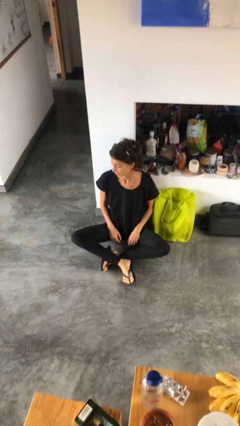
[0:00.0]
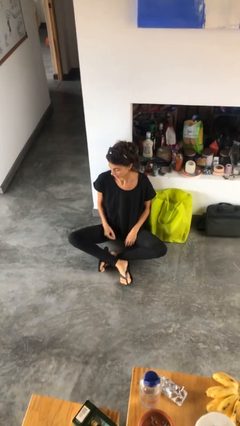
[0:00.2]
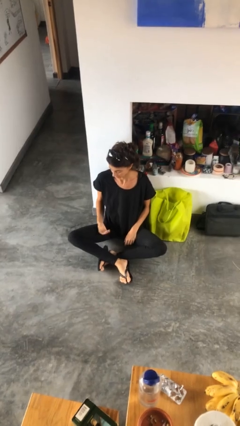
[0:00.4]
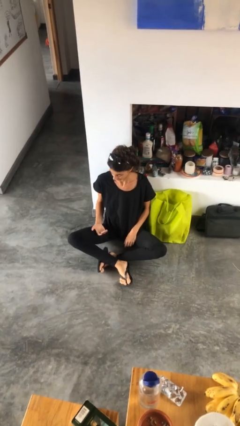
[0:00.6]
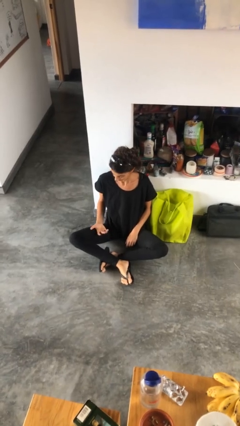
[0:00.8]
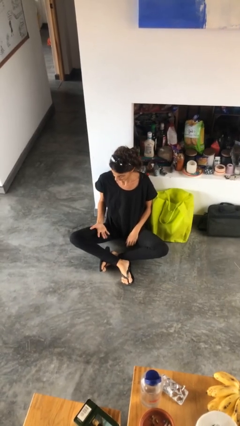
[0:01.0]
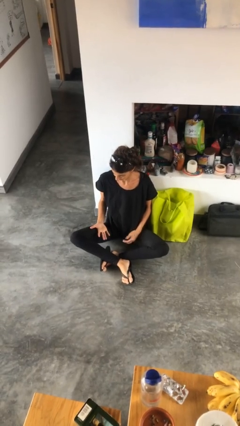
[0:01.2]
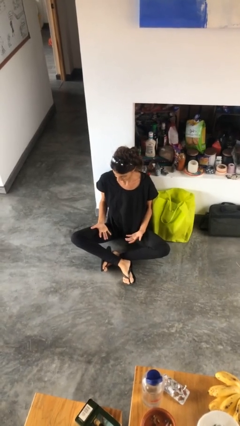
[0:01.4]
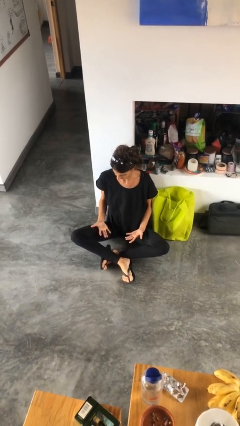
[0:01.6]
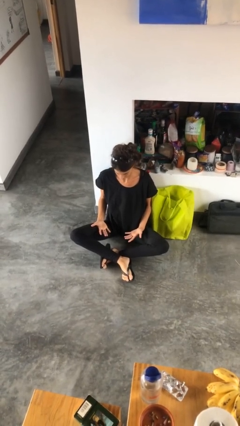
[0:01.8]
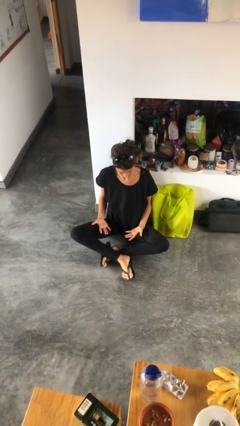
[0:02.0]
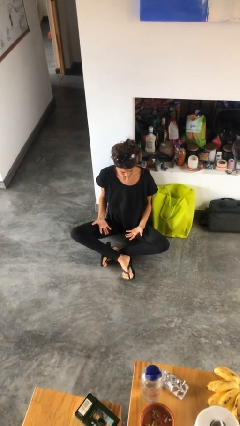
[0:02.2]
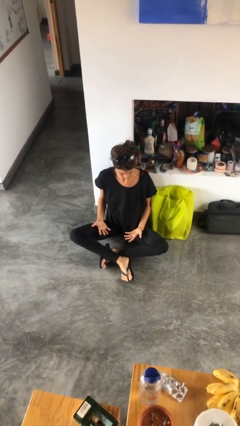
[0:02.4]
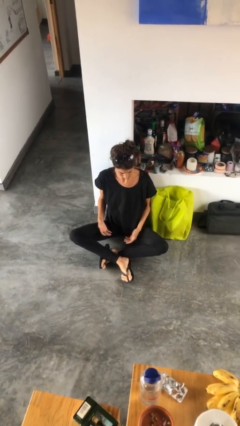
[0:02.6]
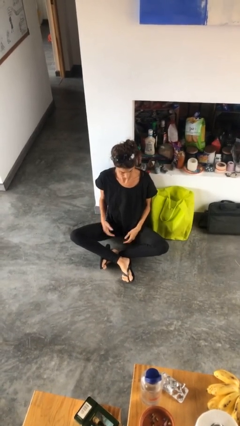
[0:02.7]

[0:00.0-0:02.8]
person looks at hands in lap

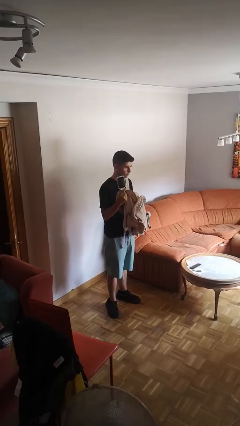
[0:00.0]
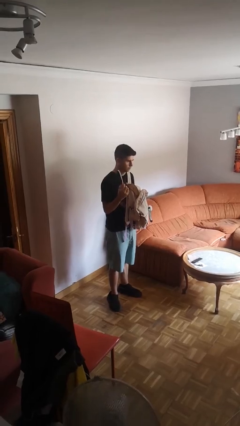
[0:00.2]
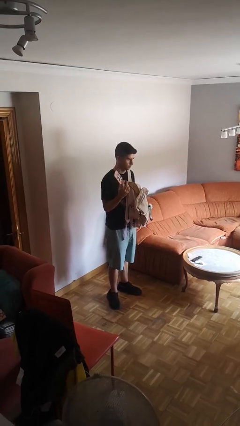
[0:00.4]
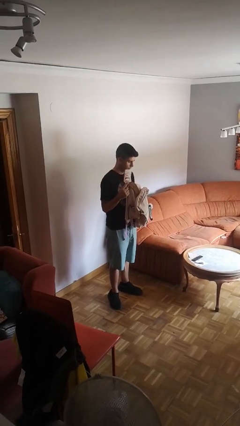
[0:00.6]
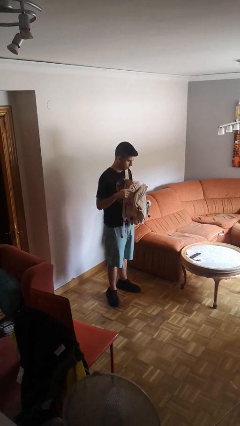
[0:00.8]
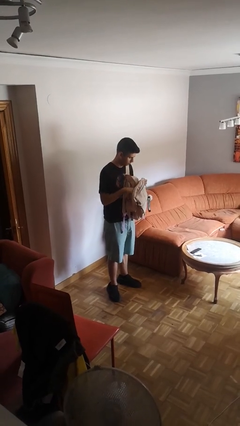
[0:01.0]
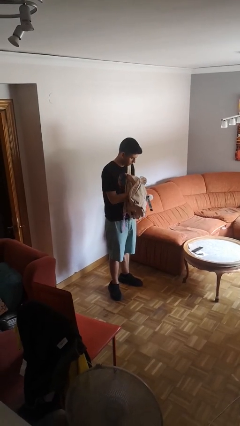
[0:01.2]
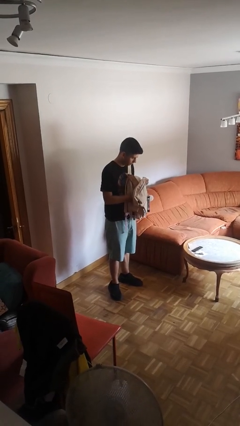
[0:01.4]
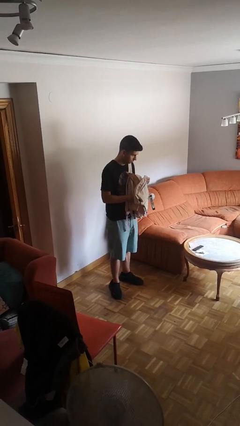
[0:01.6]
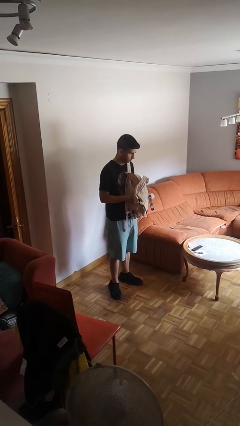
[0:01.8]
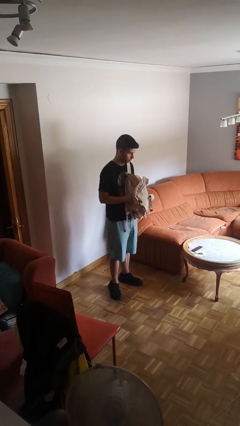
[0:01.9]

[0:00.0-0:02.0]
person puts object into backpack

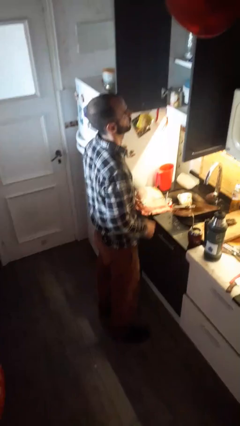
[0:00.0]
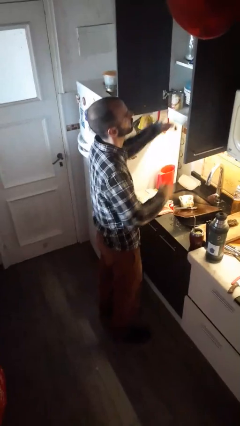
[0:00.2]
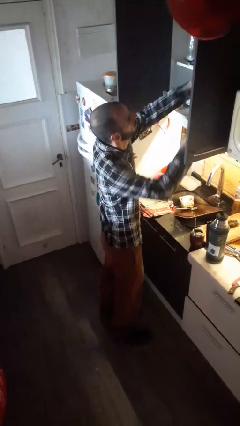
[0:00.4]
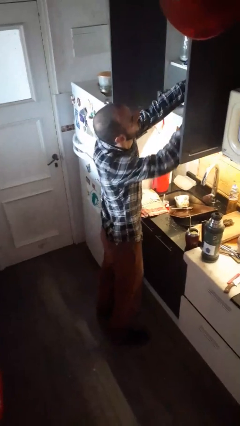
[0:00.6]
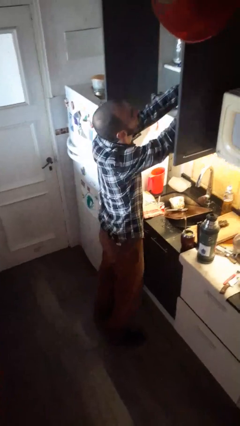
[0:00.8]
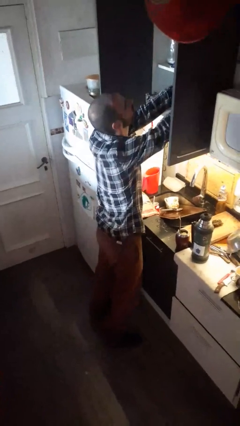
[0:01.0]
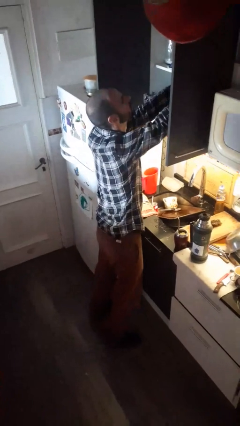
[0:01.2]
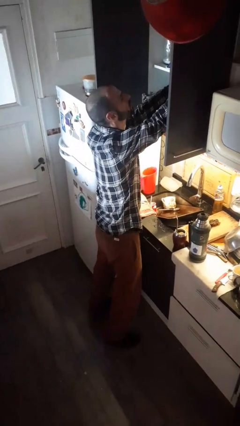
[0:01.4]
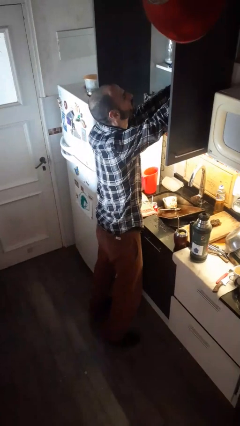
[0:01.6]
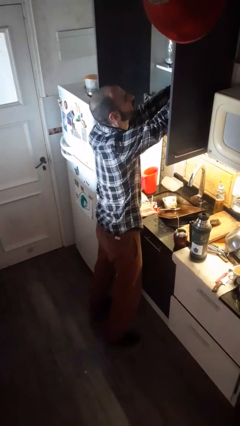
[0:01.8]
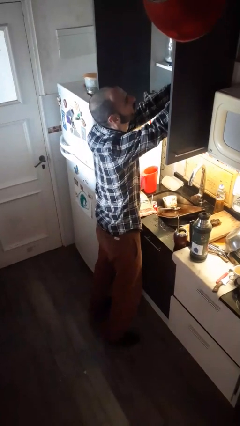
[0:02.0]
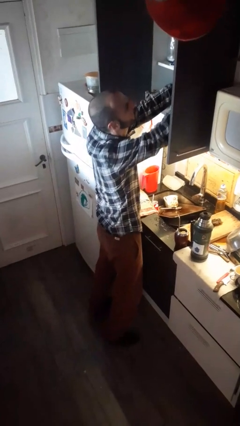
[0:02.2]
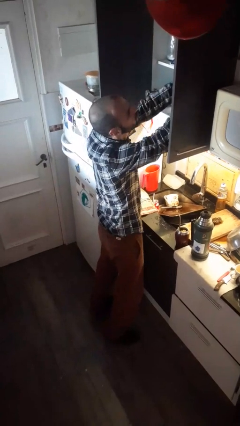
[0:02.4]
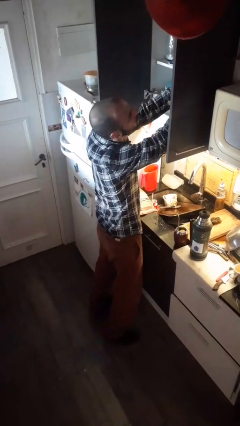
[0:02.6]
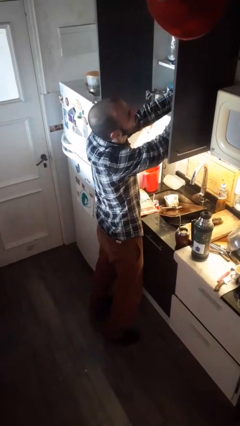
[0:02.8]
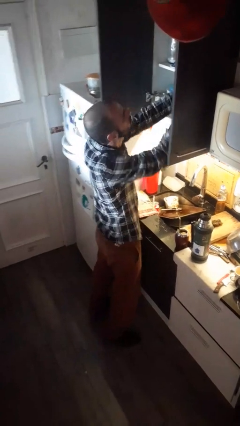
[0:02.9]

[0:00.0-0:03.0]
person searches in kitchen drawer

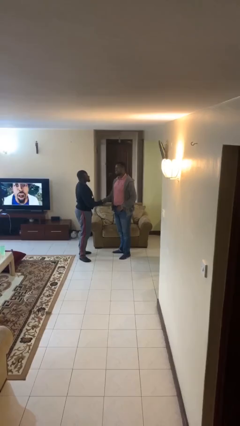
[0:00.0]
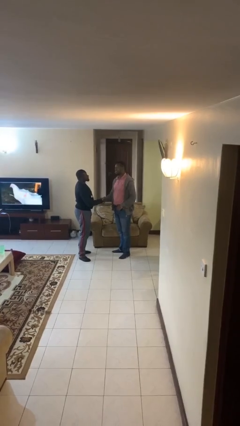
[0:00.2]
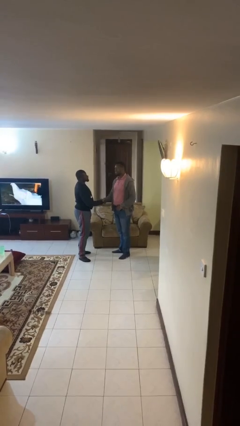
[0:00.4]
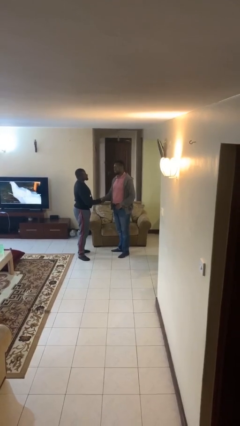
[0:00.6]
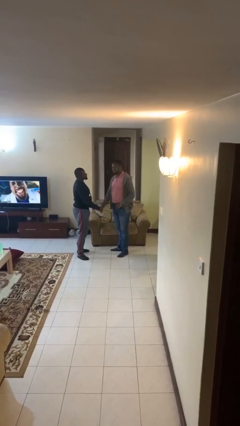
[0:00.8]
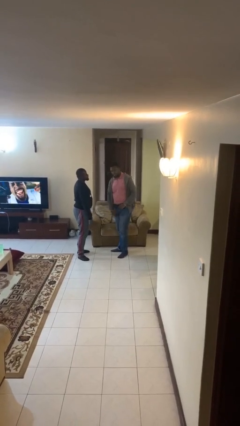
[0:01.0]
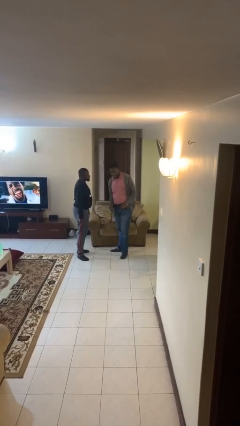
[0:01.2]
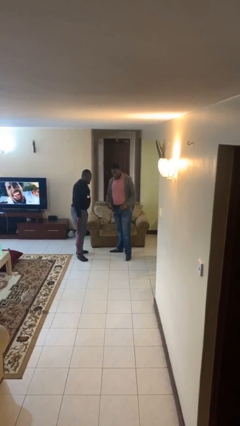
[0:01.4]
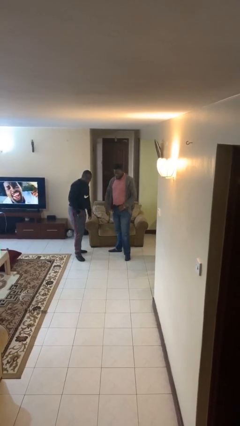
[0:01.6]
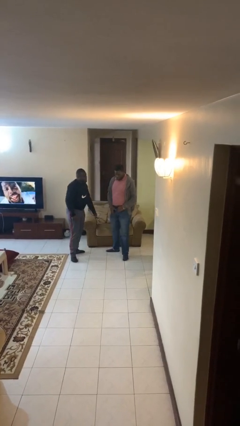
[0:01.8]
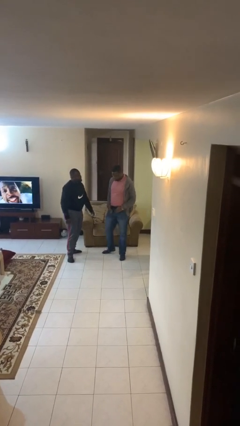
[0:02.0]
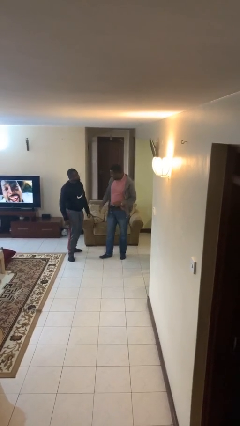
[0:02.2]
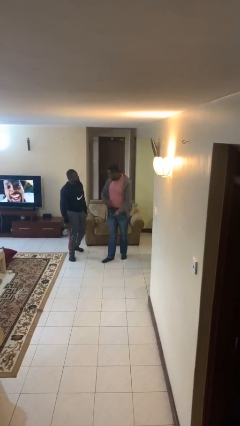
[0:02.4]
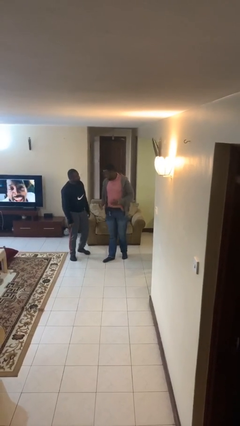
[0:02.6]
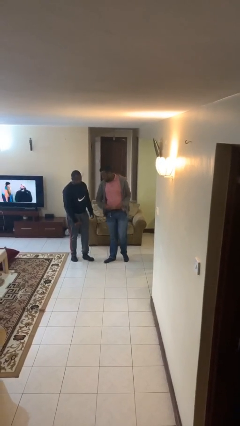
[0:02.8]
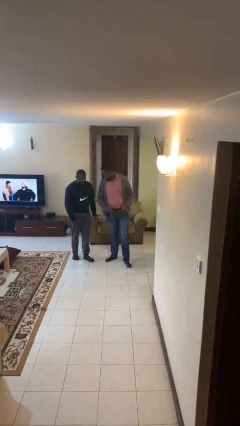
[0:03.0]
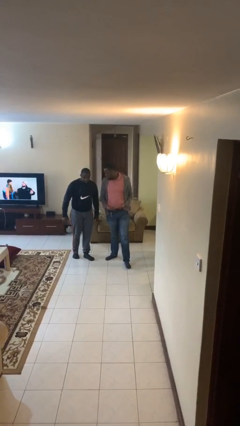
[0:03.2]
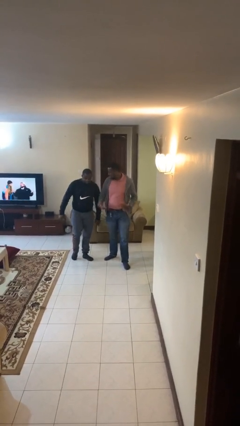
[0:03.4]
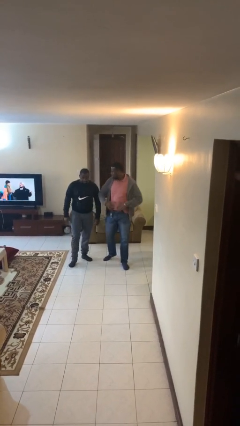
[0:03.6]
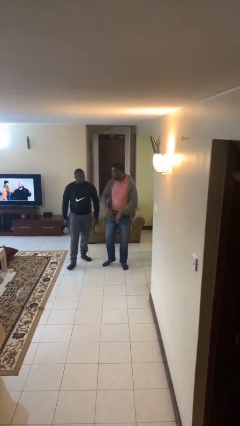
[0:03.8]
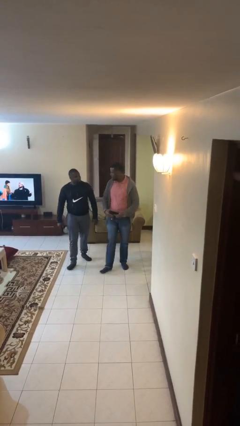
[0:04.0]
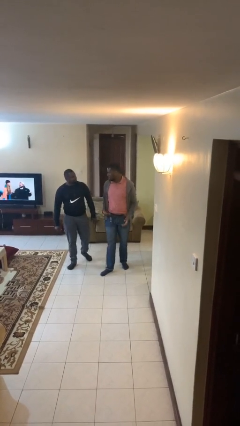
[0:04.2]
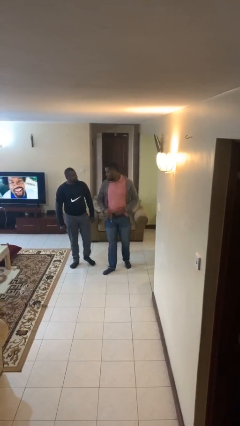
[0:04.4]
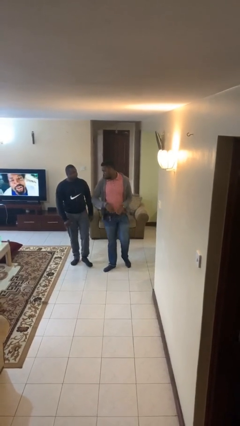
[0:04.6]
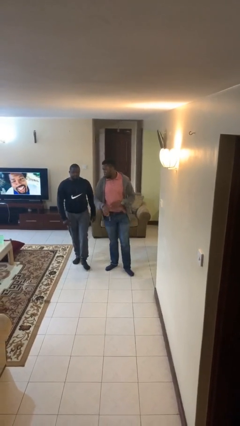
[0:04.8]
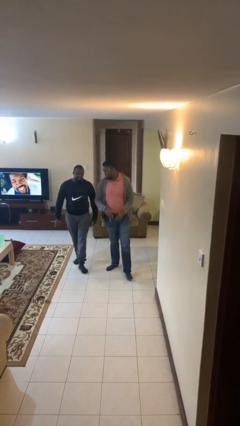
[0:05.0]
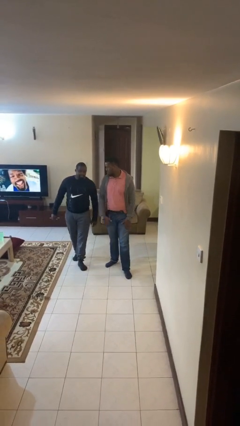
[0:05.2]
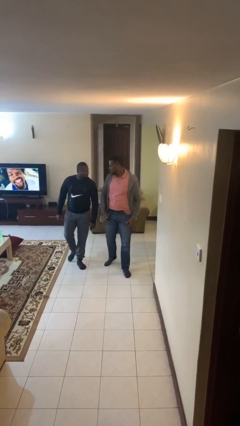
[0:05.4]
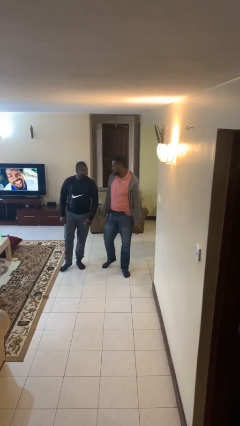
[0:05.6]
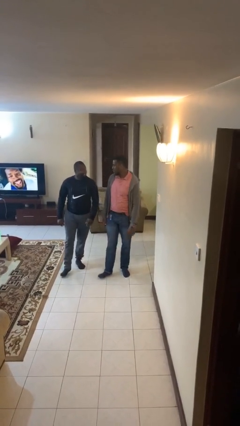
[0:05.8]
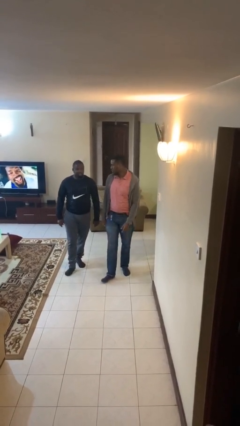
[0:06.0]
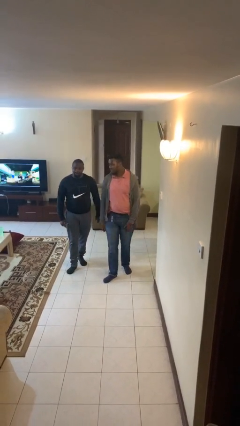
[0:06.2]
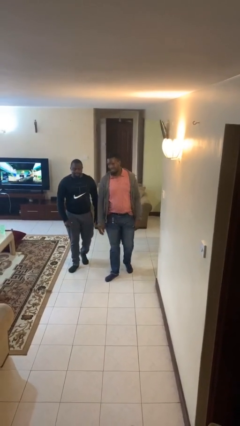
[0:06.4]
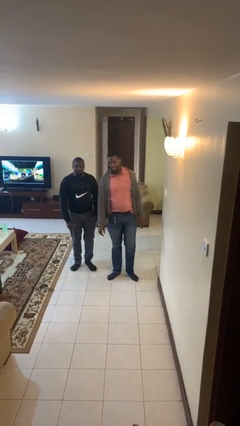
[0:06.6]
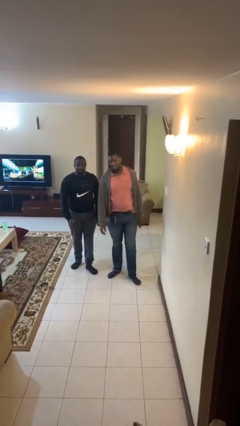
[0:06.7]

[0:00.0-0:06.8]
person talks to person

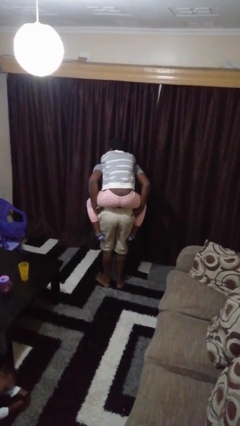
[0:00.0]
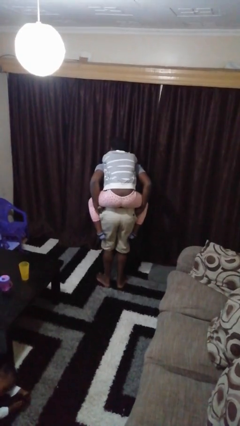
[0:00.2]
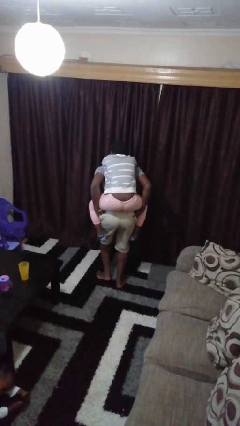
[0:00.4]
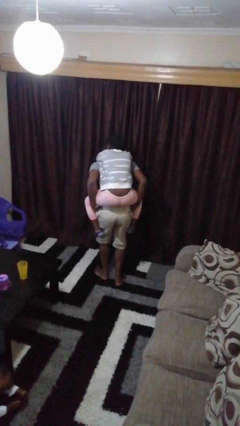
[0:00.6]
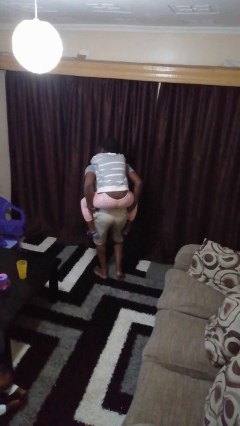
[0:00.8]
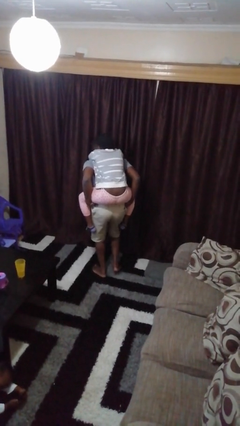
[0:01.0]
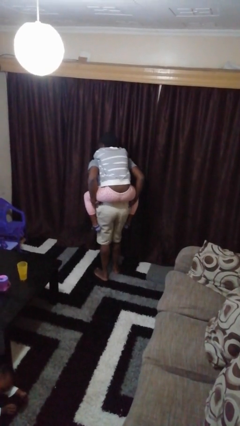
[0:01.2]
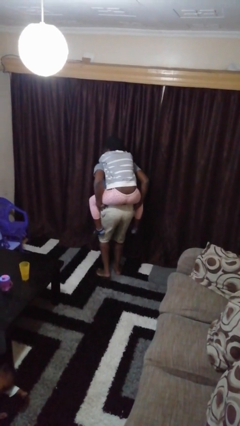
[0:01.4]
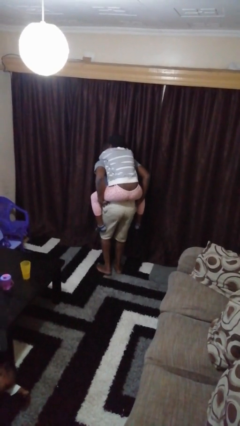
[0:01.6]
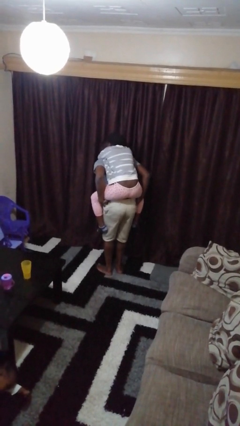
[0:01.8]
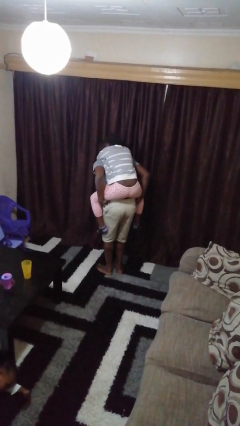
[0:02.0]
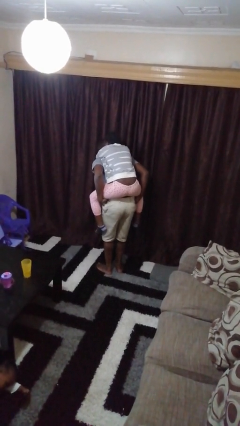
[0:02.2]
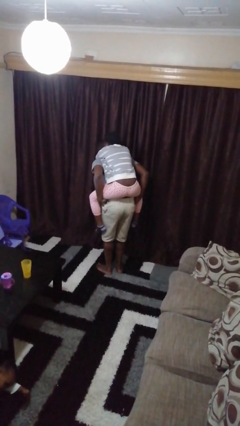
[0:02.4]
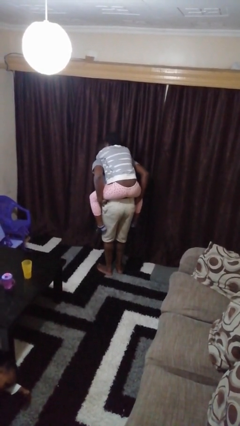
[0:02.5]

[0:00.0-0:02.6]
person carries person on back
